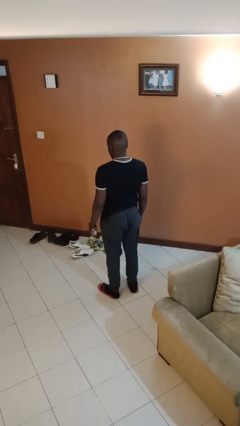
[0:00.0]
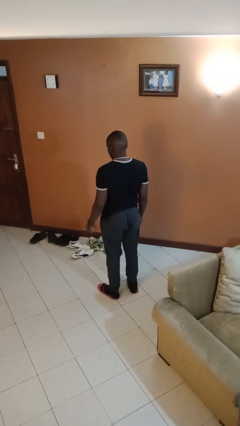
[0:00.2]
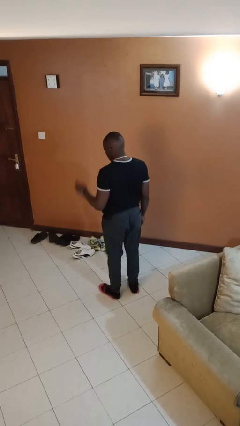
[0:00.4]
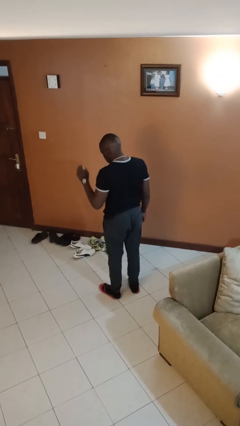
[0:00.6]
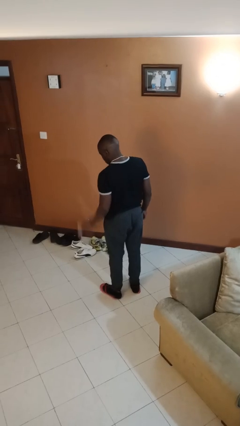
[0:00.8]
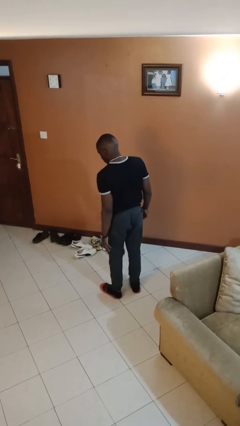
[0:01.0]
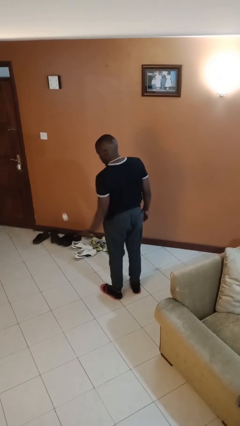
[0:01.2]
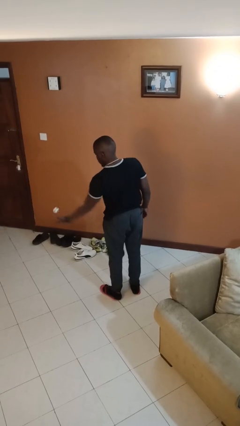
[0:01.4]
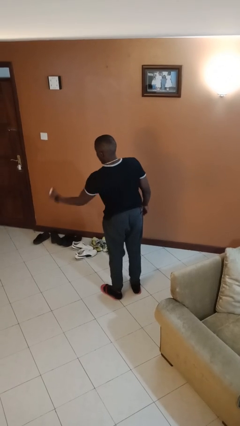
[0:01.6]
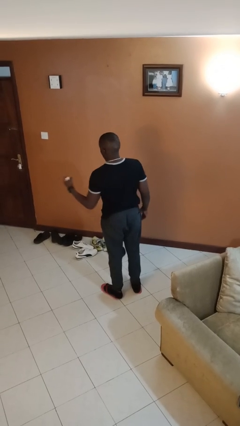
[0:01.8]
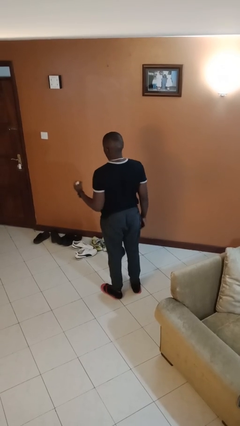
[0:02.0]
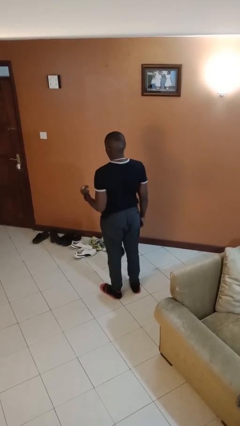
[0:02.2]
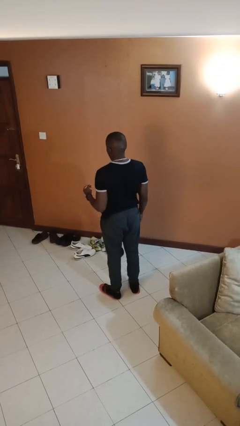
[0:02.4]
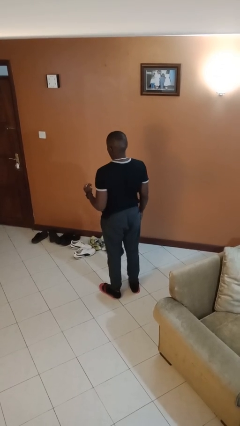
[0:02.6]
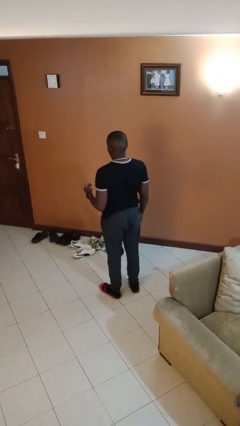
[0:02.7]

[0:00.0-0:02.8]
person bounces ball on floor

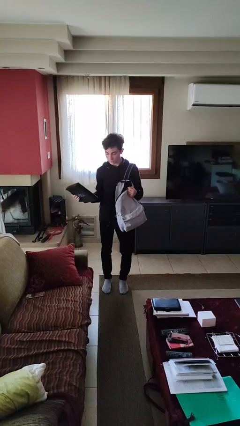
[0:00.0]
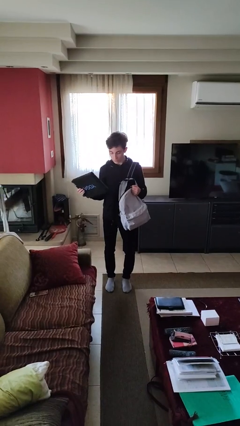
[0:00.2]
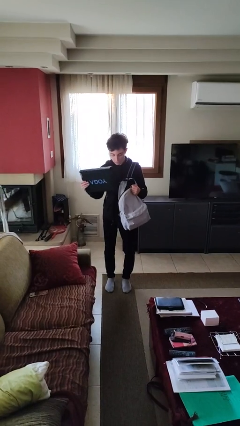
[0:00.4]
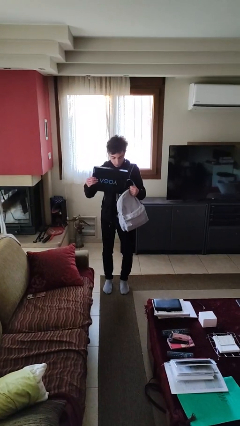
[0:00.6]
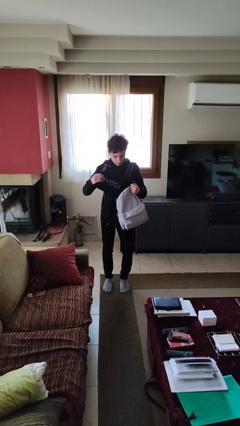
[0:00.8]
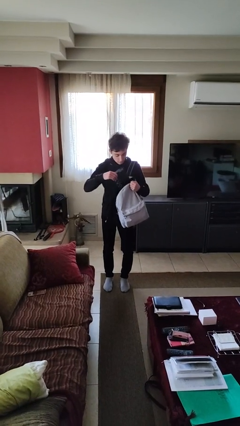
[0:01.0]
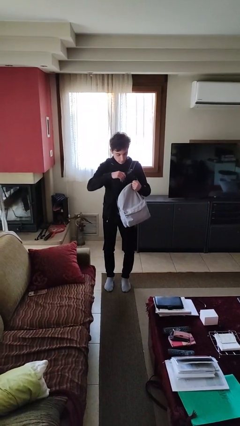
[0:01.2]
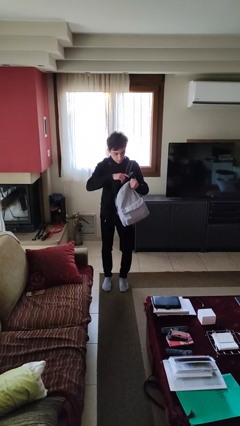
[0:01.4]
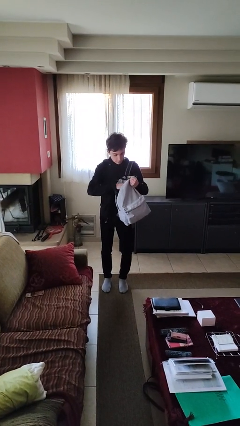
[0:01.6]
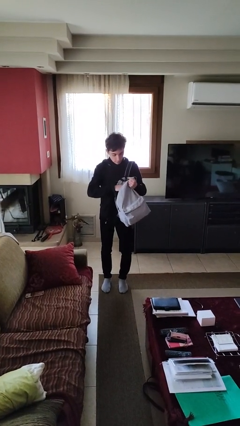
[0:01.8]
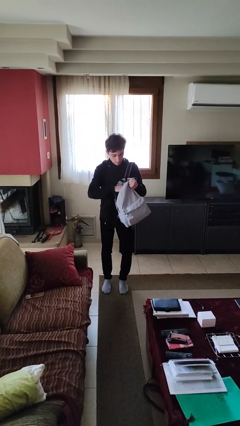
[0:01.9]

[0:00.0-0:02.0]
person puts object into backpack

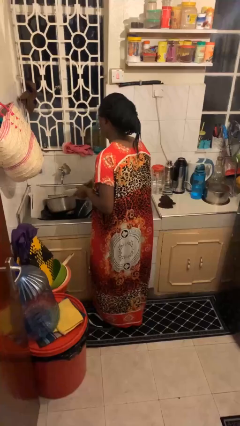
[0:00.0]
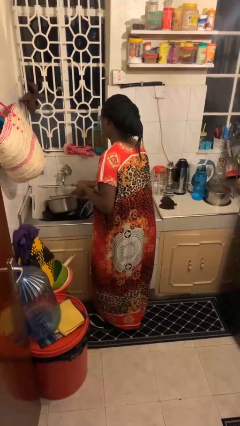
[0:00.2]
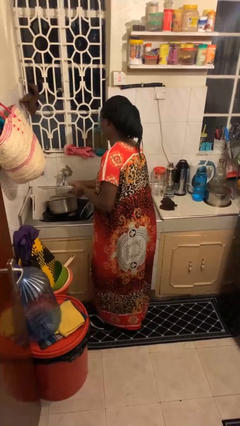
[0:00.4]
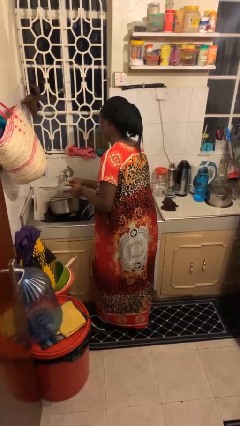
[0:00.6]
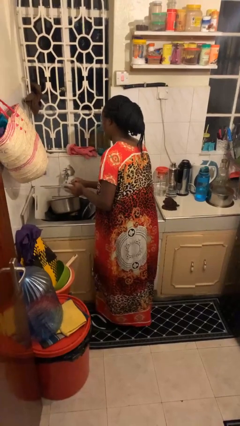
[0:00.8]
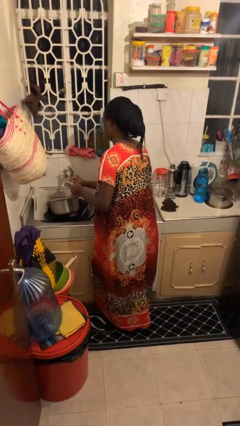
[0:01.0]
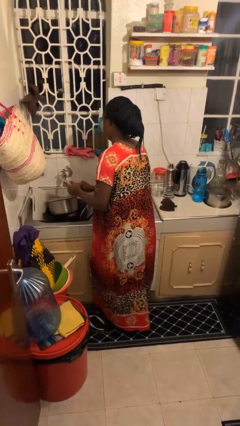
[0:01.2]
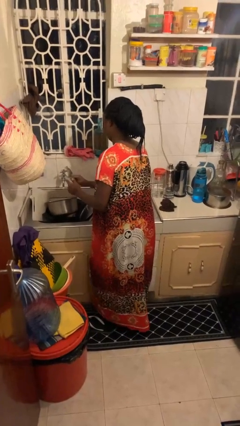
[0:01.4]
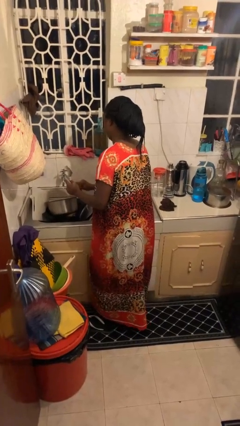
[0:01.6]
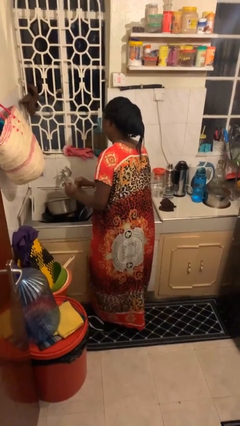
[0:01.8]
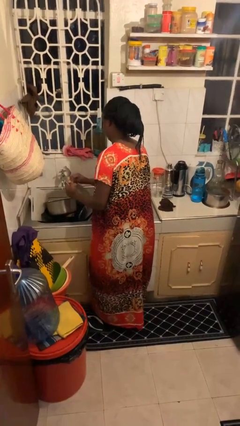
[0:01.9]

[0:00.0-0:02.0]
person washes dish

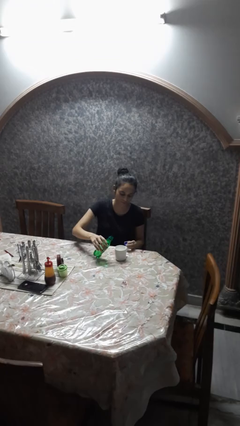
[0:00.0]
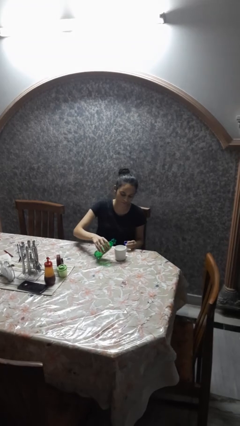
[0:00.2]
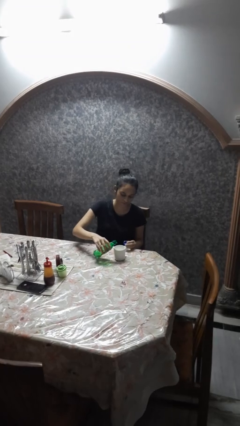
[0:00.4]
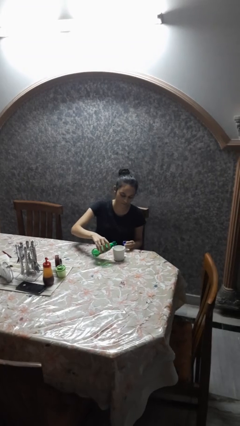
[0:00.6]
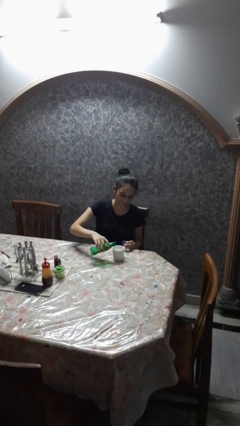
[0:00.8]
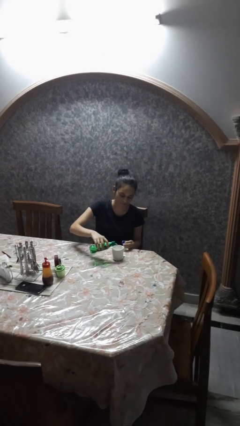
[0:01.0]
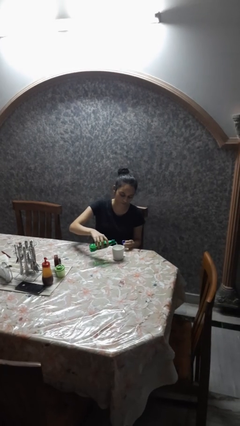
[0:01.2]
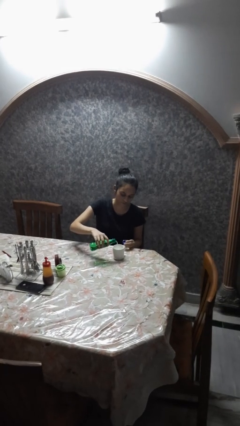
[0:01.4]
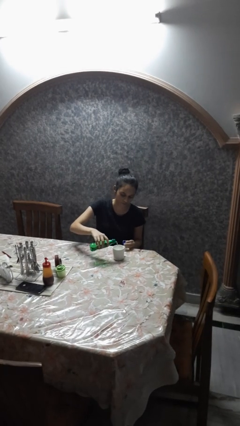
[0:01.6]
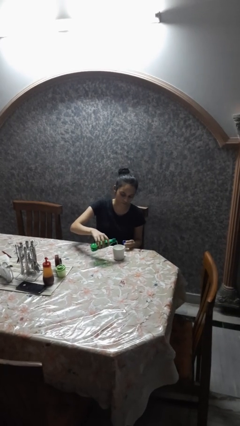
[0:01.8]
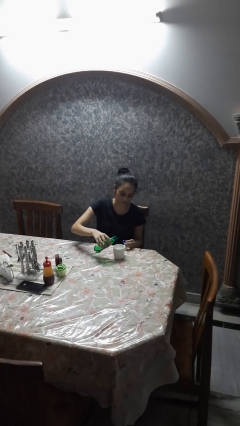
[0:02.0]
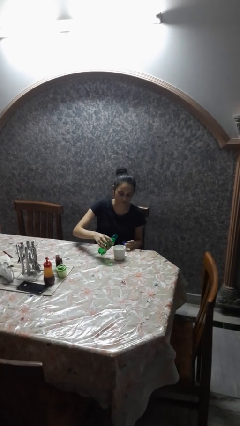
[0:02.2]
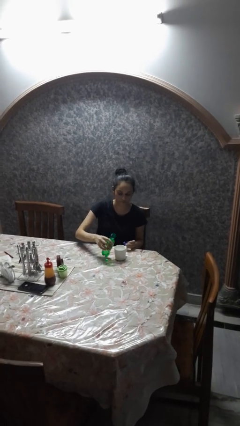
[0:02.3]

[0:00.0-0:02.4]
person pours liquid into cup

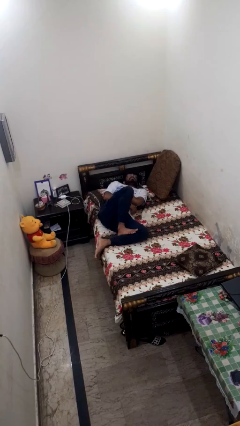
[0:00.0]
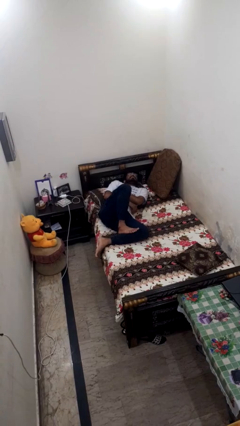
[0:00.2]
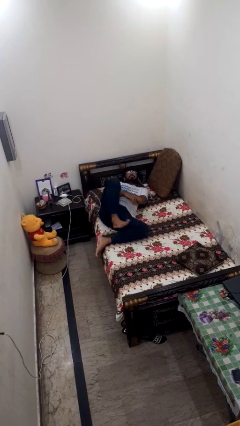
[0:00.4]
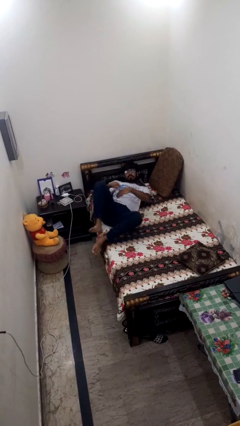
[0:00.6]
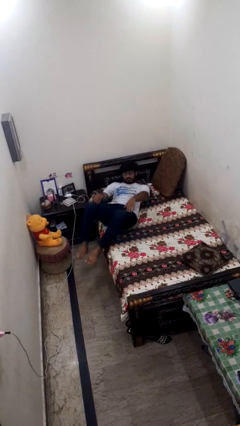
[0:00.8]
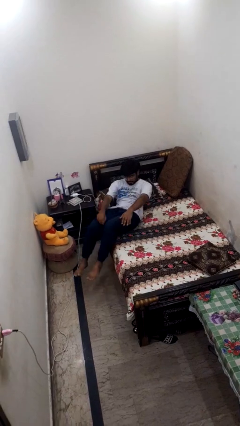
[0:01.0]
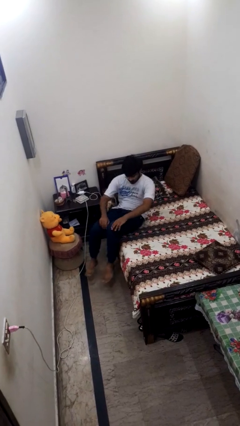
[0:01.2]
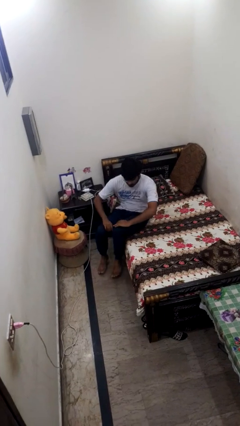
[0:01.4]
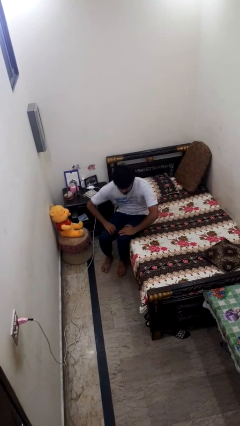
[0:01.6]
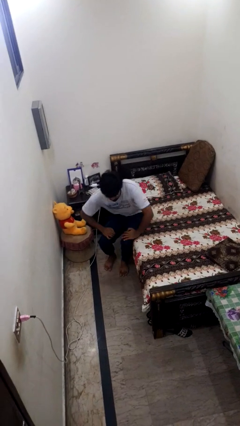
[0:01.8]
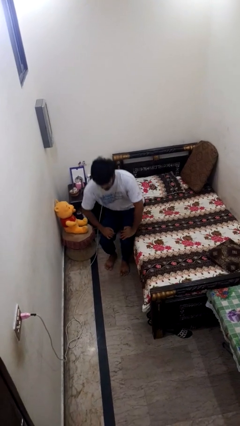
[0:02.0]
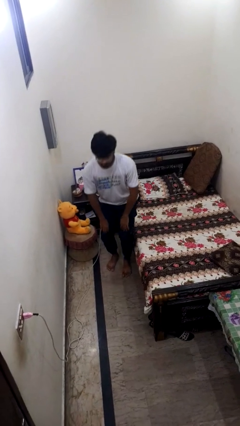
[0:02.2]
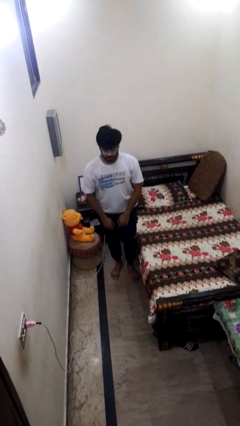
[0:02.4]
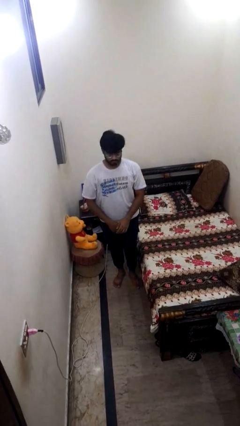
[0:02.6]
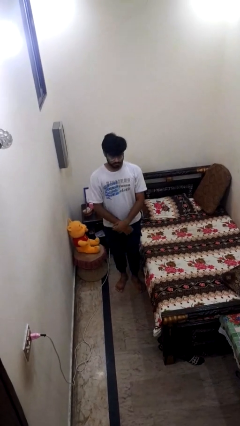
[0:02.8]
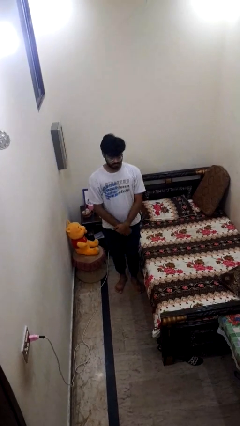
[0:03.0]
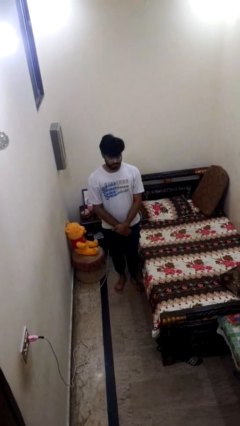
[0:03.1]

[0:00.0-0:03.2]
person stands up

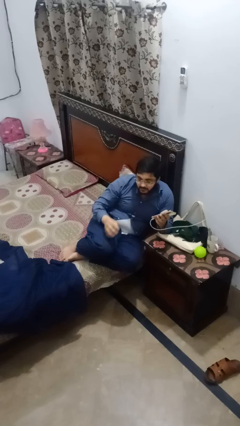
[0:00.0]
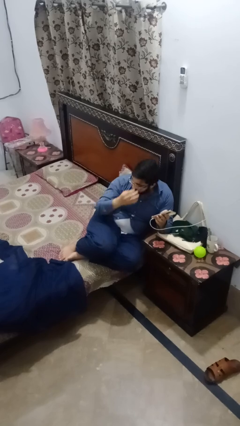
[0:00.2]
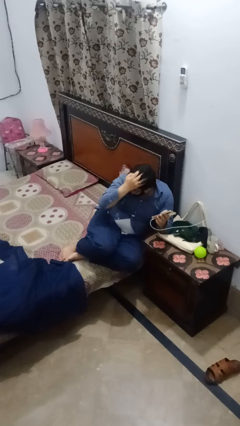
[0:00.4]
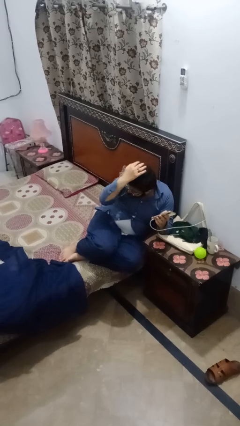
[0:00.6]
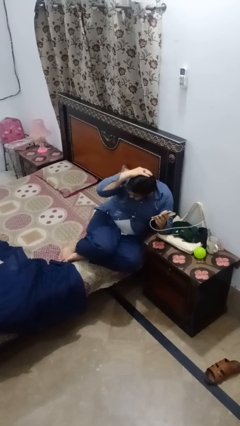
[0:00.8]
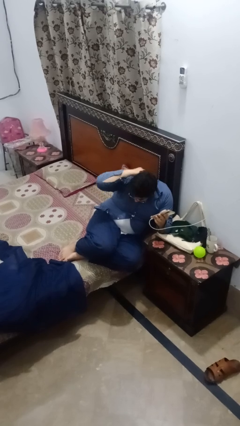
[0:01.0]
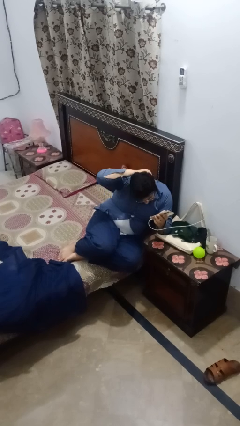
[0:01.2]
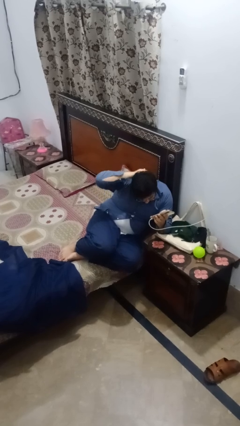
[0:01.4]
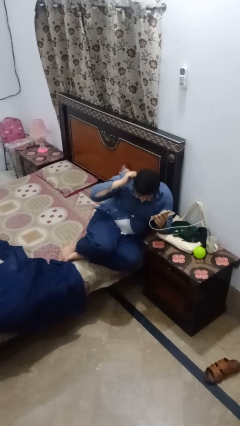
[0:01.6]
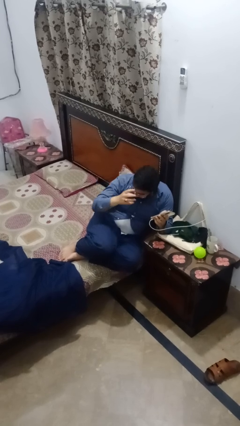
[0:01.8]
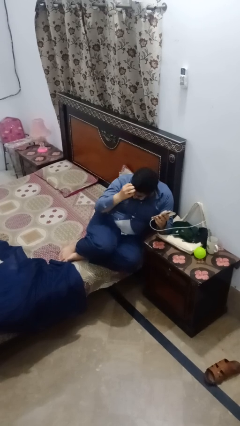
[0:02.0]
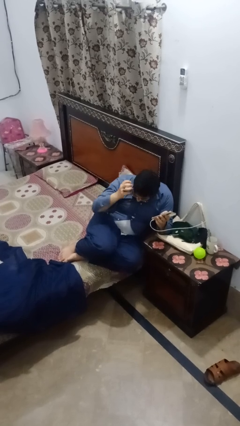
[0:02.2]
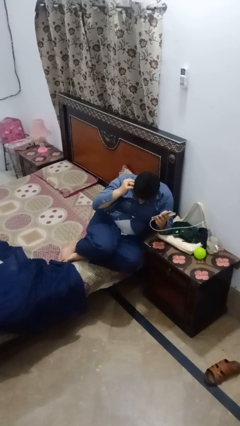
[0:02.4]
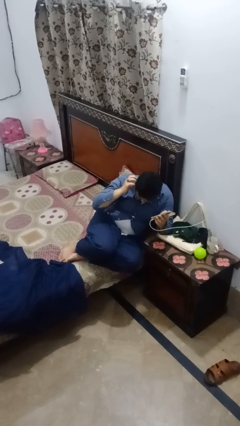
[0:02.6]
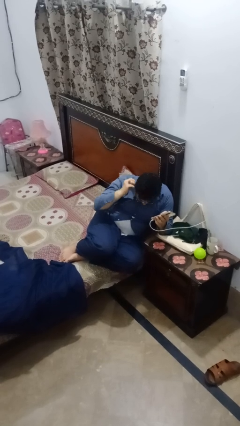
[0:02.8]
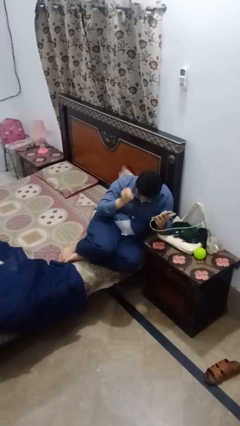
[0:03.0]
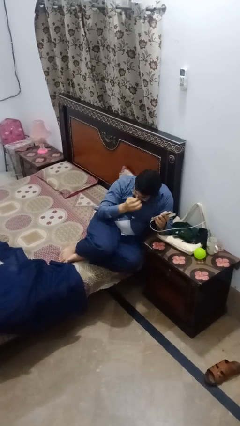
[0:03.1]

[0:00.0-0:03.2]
person strokes hair

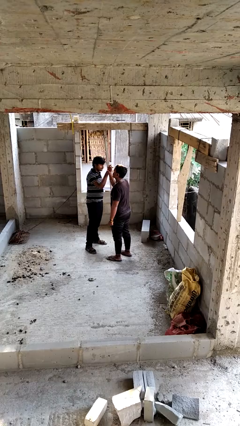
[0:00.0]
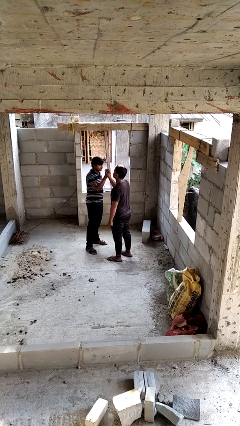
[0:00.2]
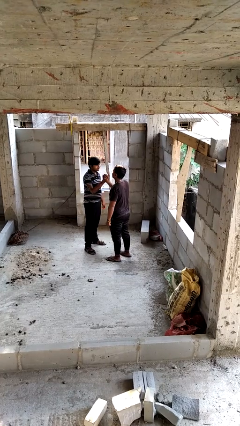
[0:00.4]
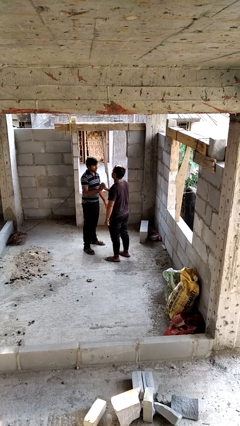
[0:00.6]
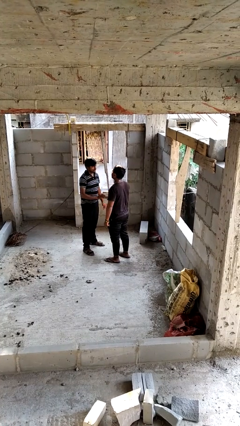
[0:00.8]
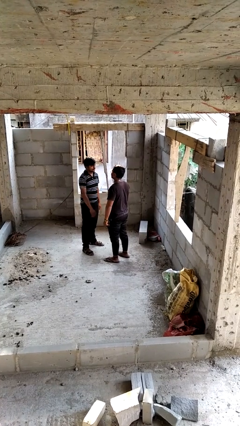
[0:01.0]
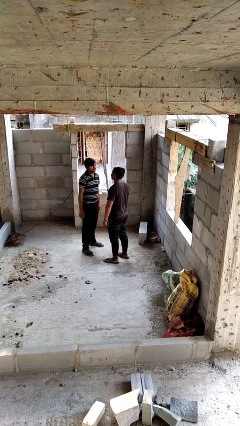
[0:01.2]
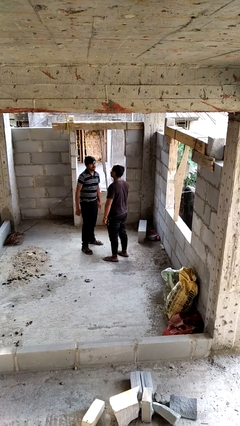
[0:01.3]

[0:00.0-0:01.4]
person highfives hand
